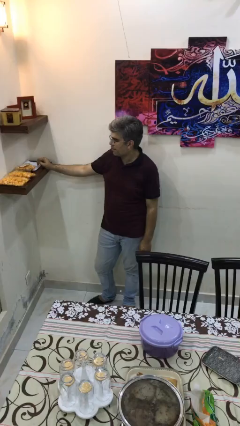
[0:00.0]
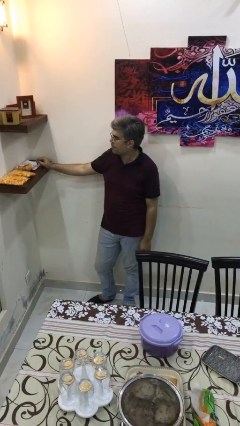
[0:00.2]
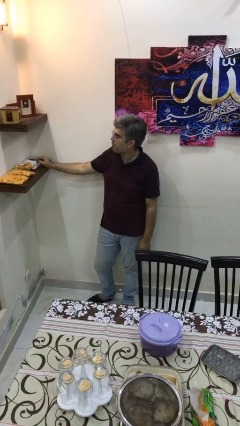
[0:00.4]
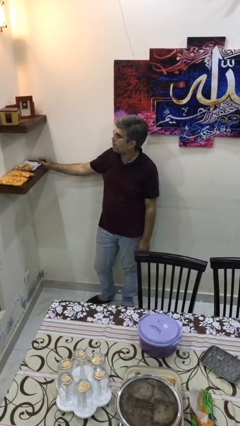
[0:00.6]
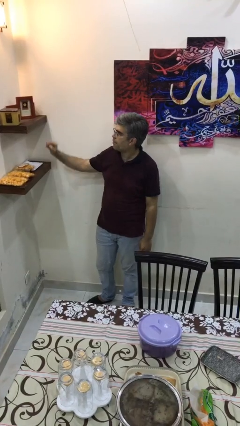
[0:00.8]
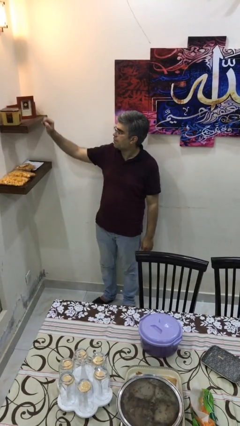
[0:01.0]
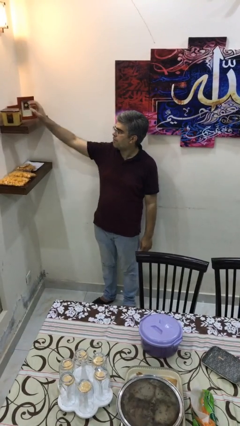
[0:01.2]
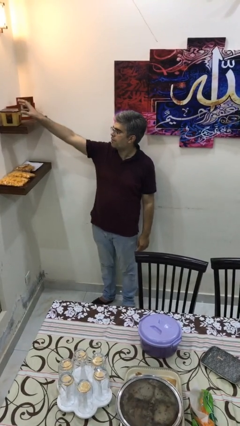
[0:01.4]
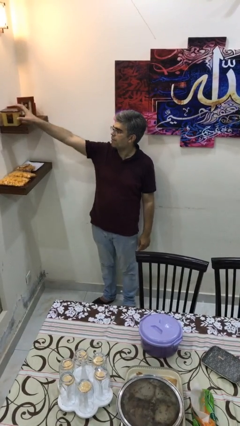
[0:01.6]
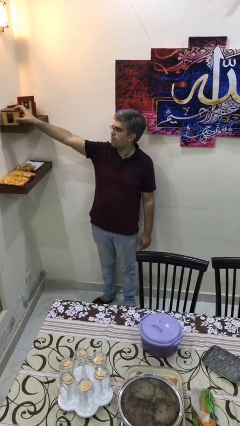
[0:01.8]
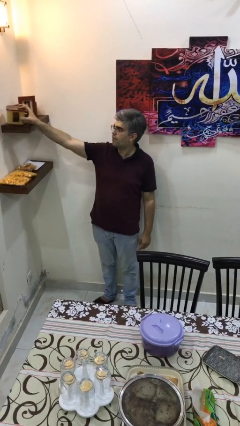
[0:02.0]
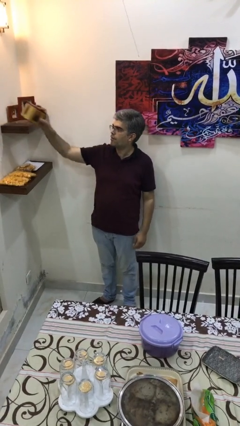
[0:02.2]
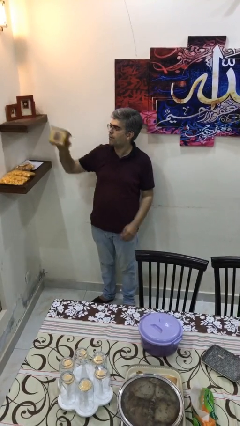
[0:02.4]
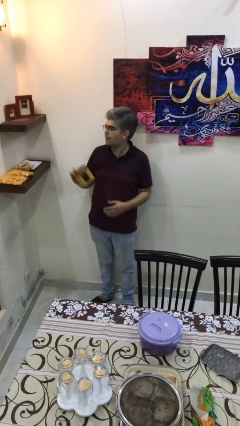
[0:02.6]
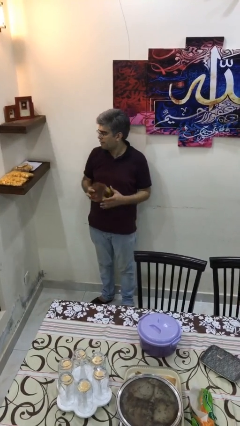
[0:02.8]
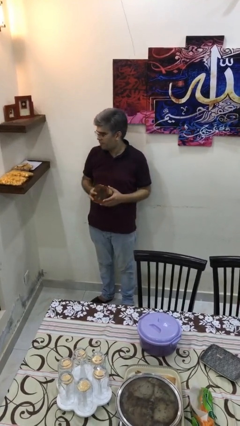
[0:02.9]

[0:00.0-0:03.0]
person picks up object from shelf

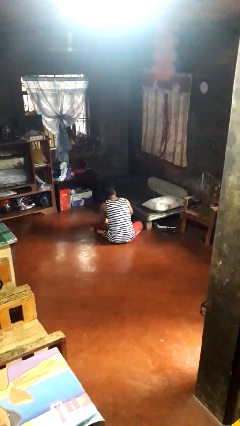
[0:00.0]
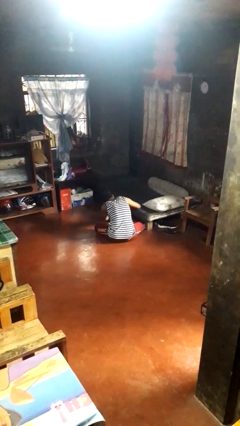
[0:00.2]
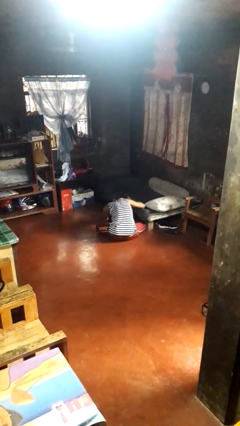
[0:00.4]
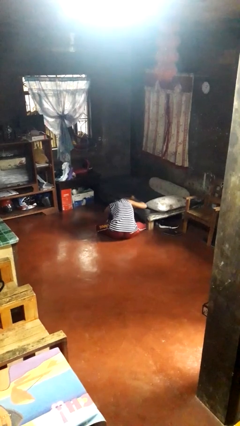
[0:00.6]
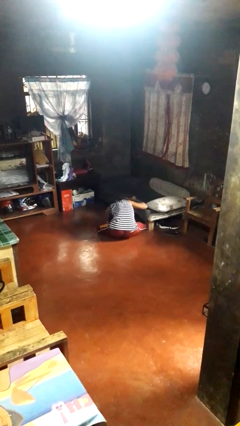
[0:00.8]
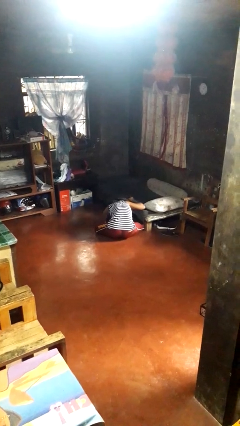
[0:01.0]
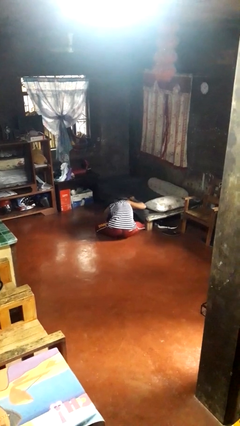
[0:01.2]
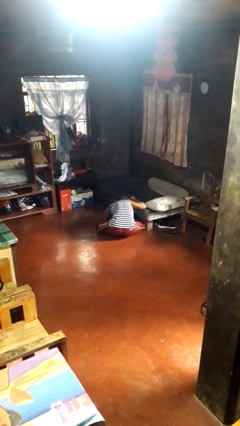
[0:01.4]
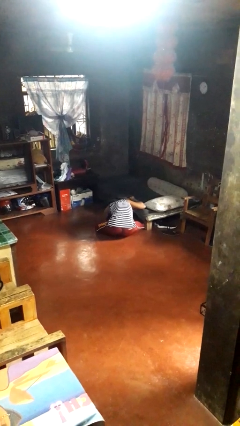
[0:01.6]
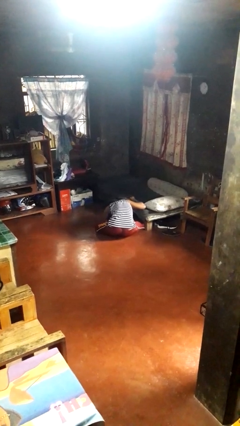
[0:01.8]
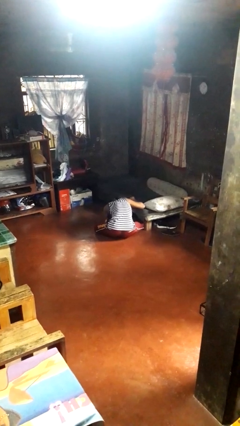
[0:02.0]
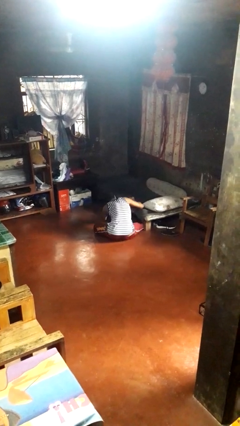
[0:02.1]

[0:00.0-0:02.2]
person searches under bed

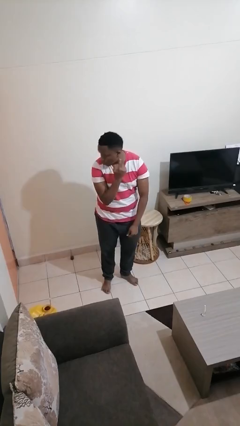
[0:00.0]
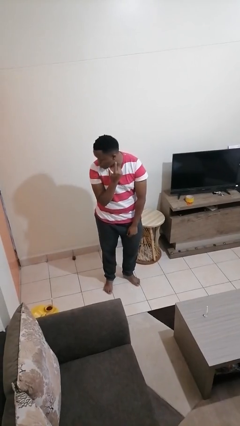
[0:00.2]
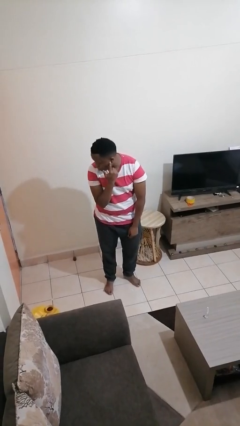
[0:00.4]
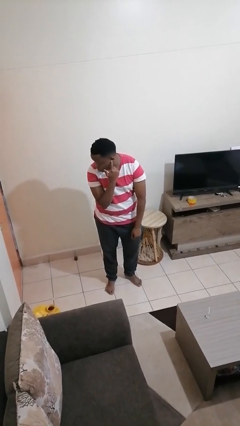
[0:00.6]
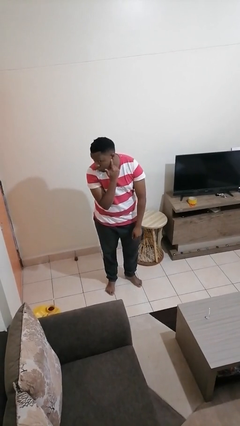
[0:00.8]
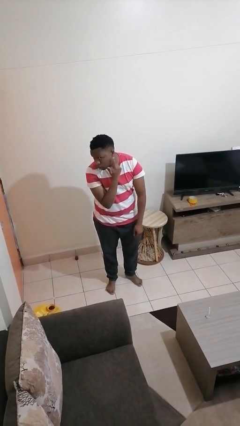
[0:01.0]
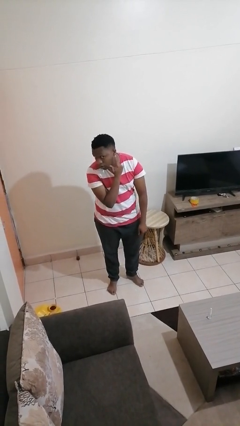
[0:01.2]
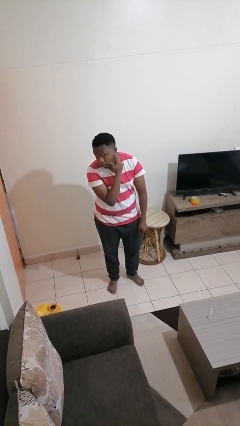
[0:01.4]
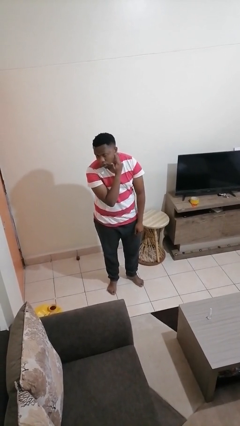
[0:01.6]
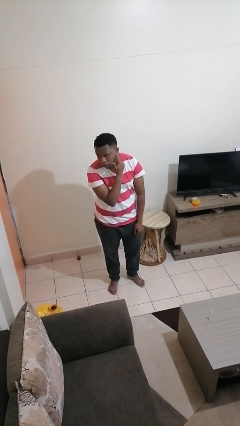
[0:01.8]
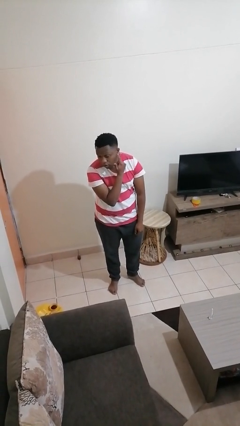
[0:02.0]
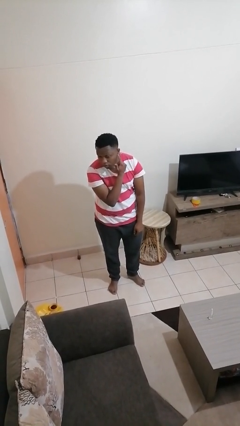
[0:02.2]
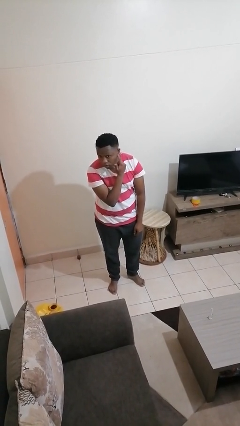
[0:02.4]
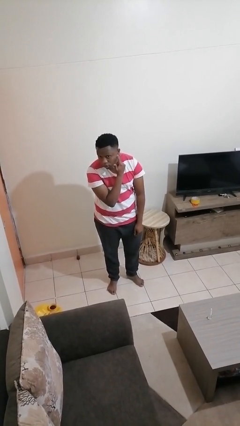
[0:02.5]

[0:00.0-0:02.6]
person gestures listen closely

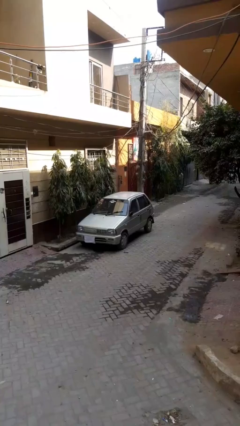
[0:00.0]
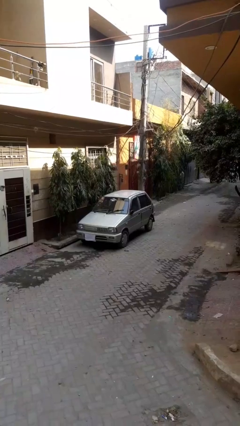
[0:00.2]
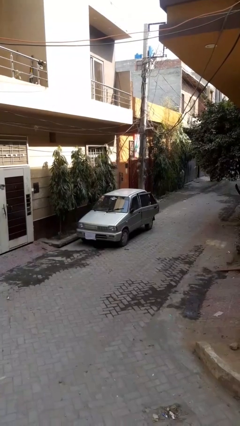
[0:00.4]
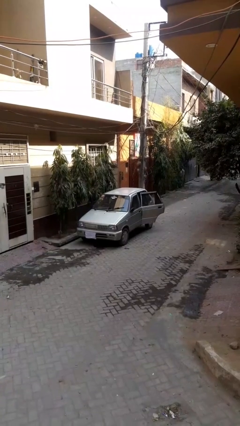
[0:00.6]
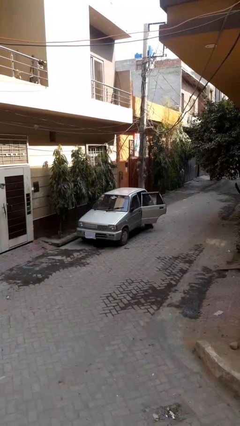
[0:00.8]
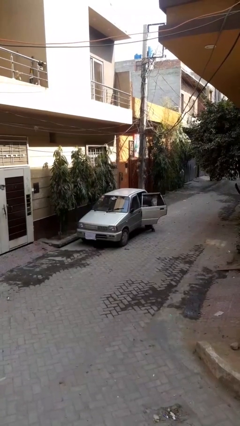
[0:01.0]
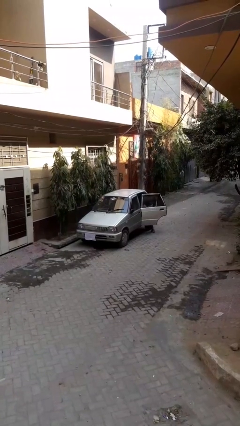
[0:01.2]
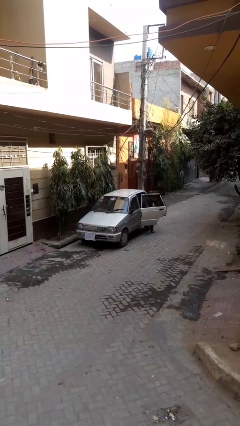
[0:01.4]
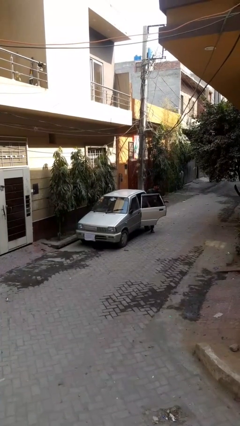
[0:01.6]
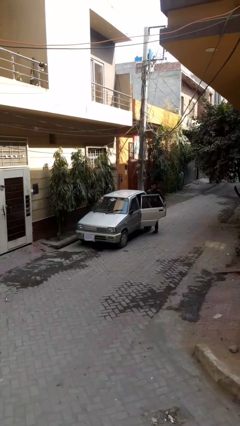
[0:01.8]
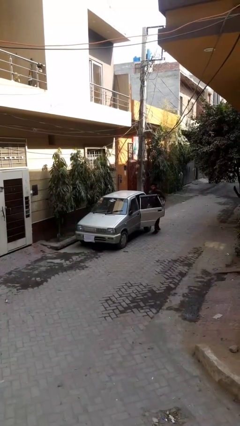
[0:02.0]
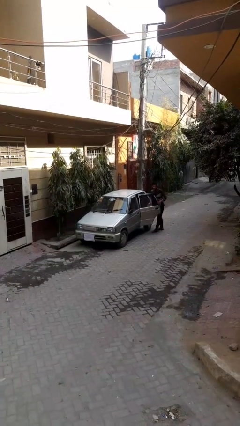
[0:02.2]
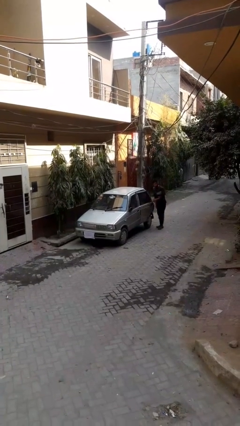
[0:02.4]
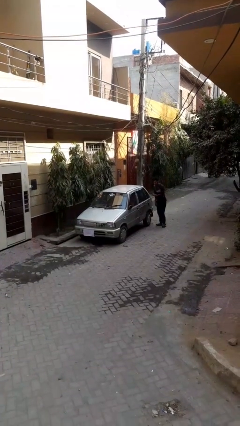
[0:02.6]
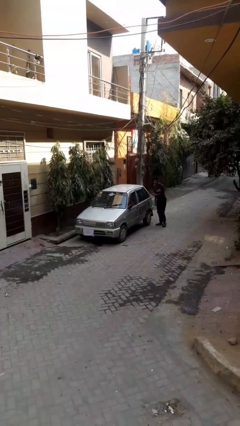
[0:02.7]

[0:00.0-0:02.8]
car drops off person

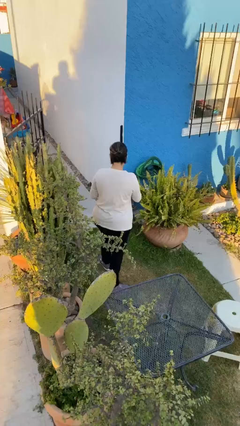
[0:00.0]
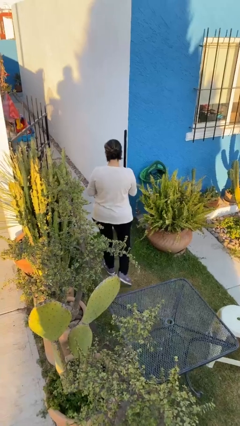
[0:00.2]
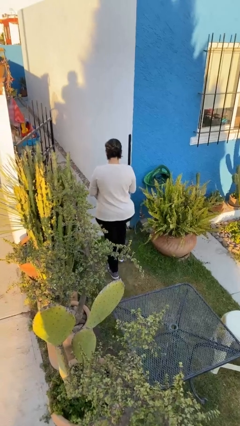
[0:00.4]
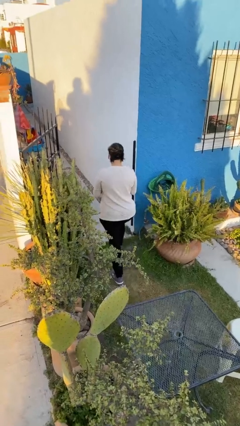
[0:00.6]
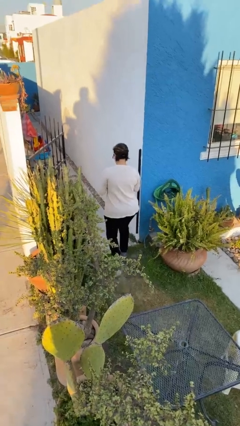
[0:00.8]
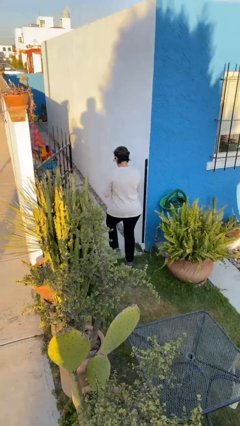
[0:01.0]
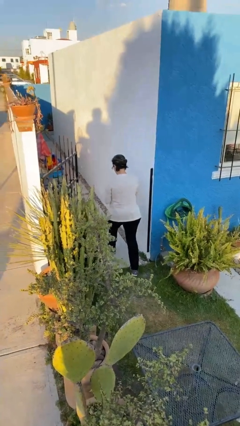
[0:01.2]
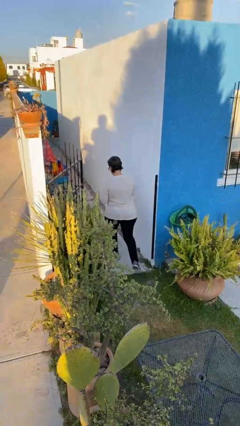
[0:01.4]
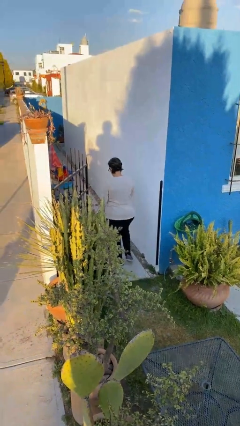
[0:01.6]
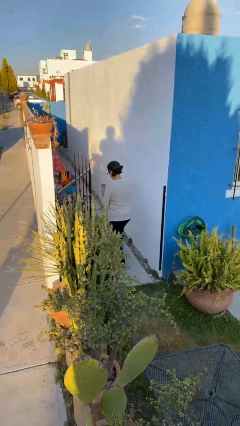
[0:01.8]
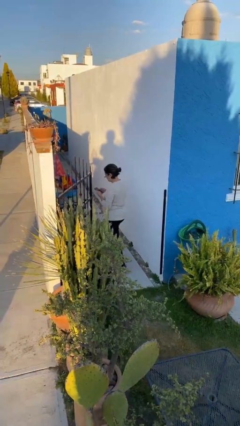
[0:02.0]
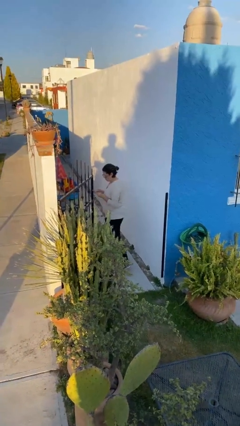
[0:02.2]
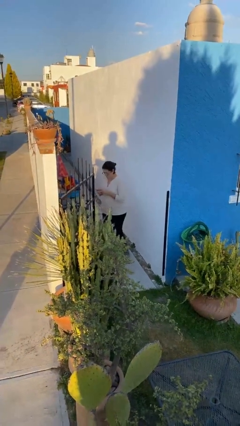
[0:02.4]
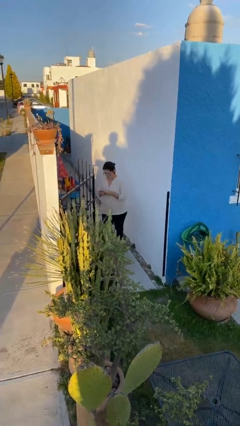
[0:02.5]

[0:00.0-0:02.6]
person exits scene through structure

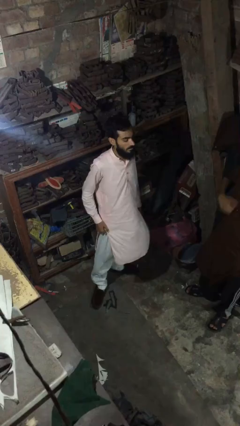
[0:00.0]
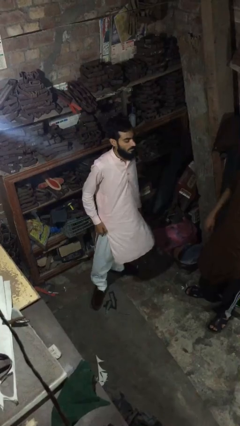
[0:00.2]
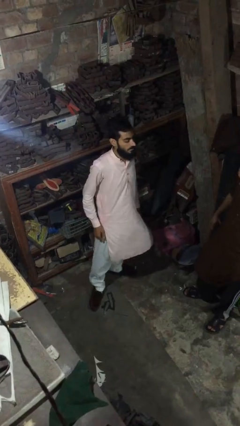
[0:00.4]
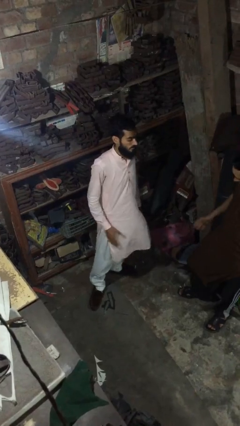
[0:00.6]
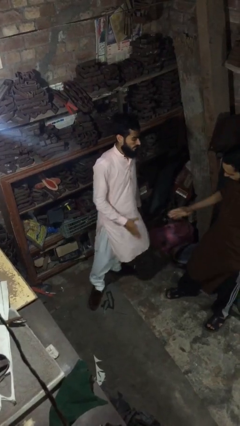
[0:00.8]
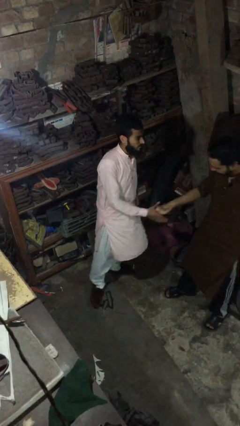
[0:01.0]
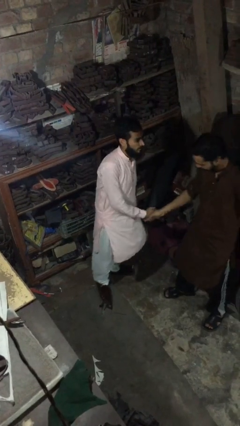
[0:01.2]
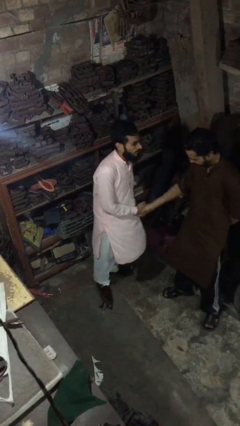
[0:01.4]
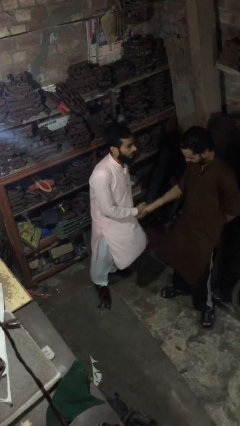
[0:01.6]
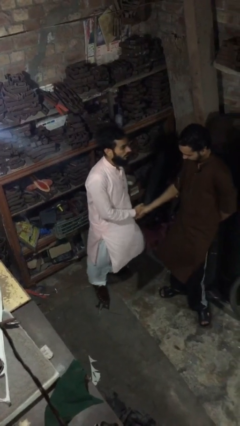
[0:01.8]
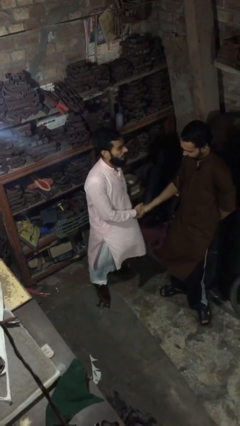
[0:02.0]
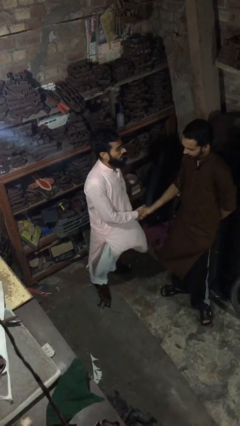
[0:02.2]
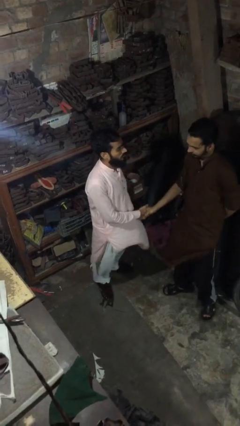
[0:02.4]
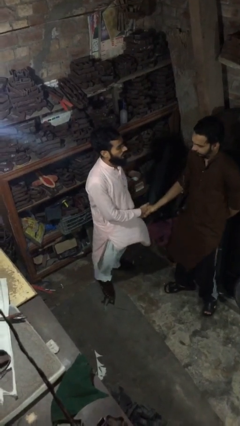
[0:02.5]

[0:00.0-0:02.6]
person shakes hand

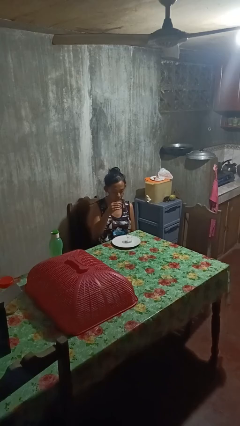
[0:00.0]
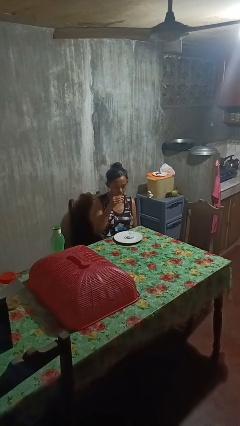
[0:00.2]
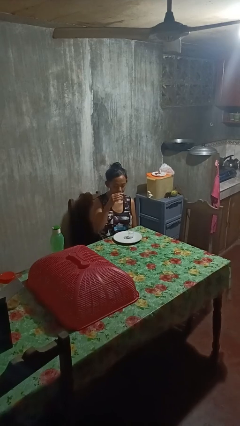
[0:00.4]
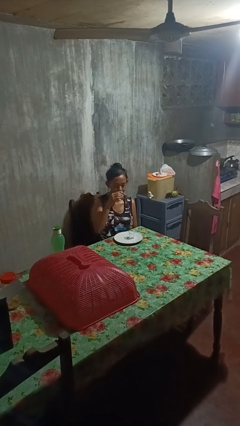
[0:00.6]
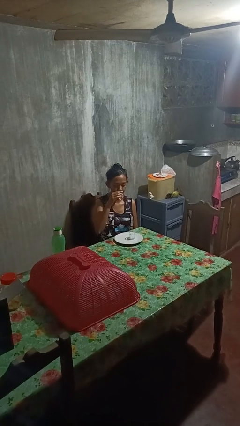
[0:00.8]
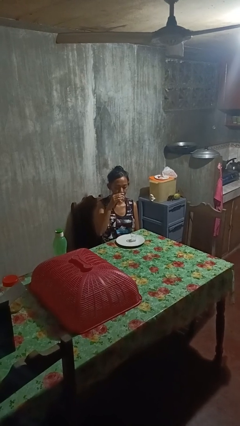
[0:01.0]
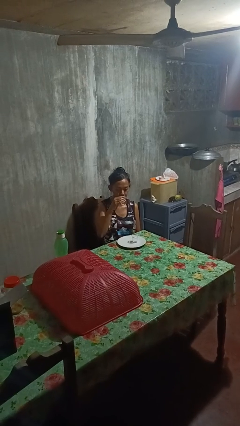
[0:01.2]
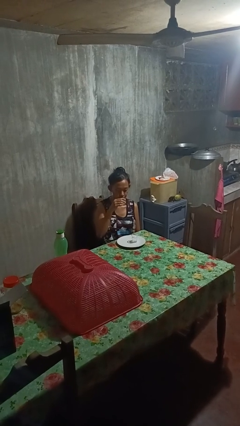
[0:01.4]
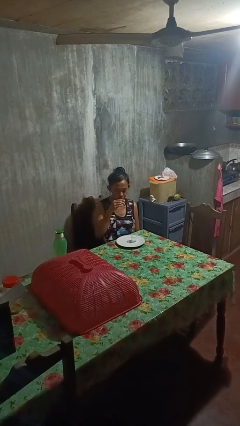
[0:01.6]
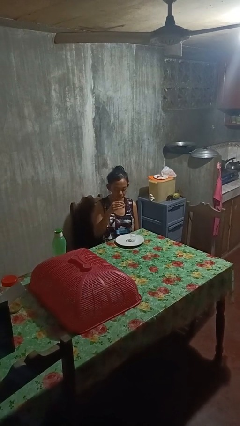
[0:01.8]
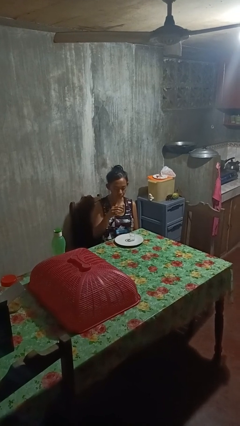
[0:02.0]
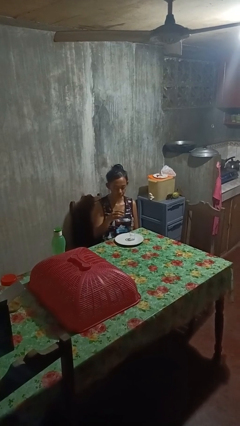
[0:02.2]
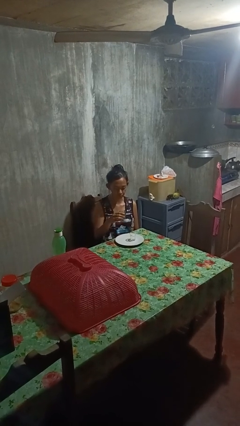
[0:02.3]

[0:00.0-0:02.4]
person drinks from shotglass
